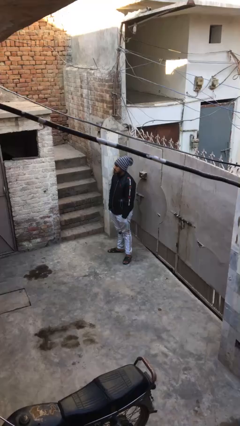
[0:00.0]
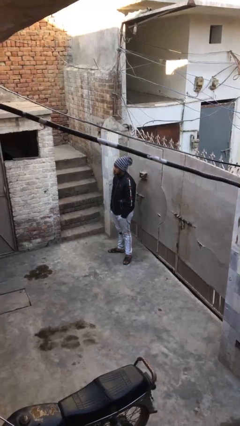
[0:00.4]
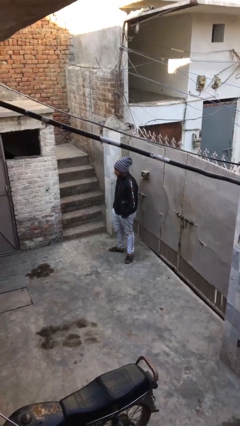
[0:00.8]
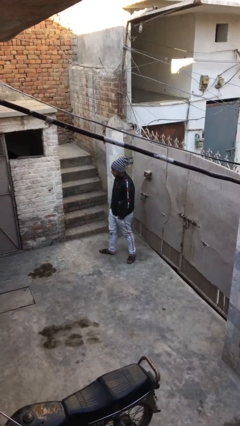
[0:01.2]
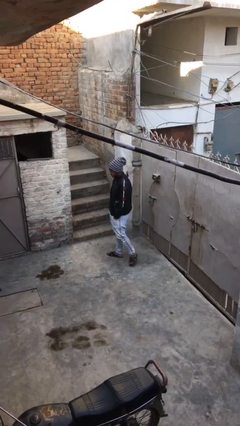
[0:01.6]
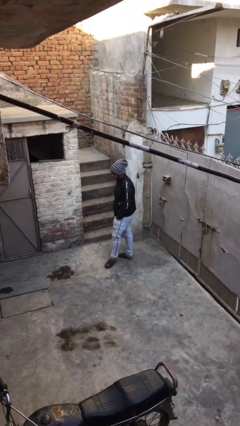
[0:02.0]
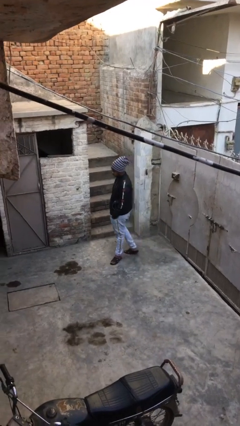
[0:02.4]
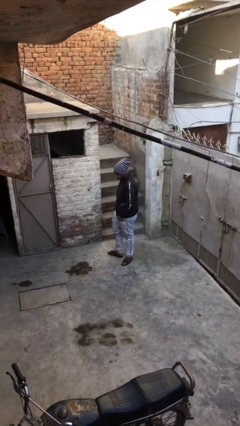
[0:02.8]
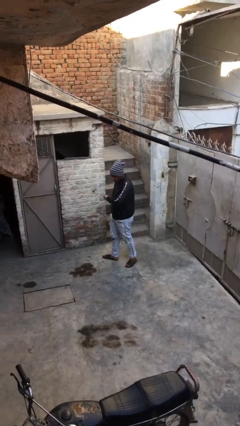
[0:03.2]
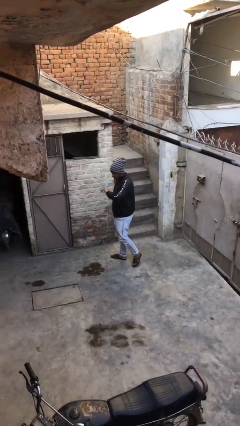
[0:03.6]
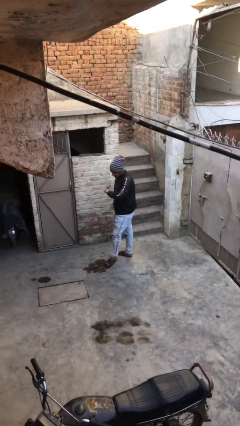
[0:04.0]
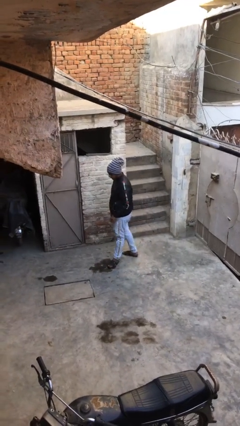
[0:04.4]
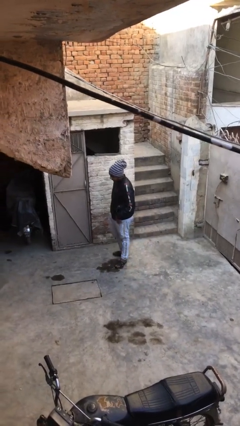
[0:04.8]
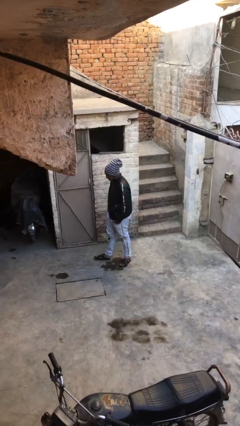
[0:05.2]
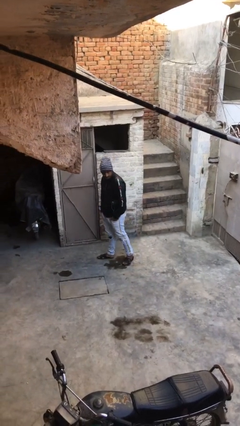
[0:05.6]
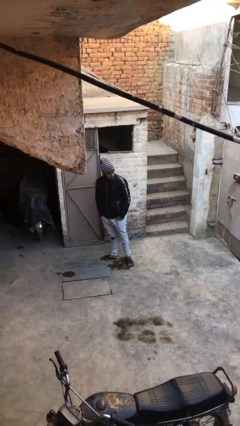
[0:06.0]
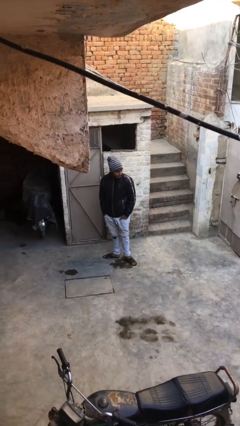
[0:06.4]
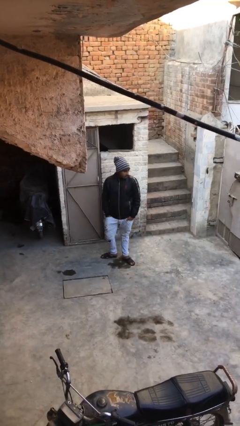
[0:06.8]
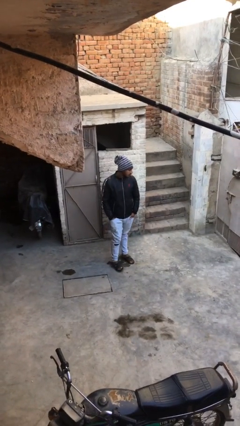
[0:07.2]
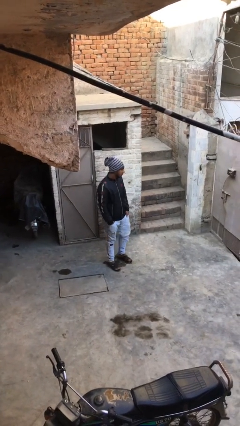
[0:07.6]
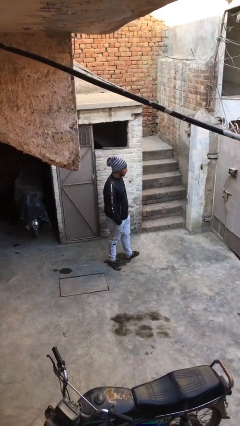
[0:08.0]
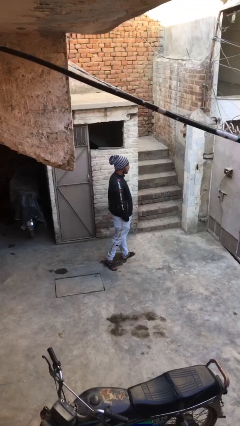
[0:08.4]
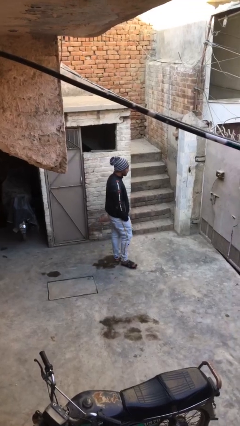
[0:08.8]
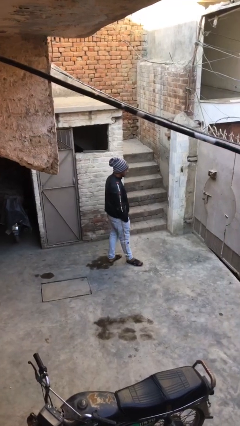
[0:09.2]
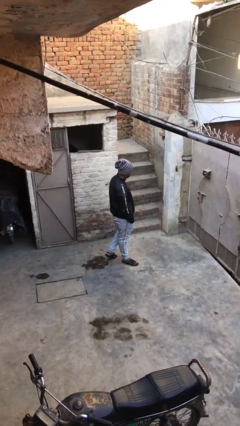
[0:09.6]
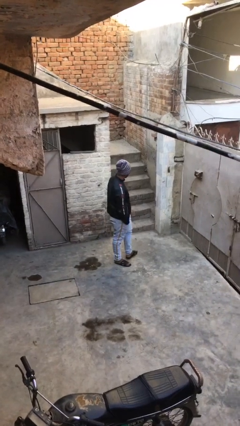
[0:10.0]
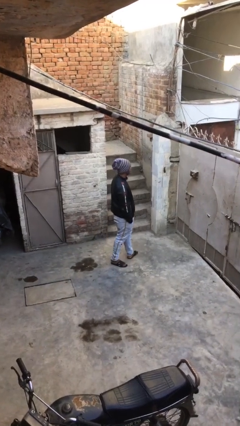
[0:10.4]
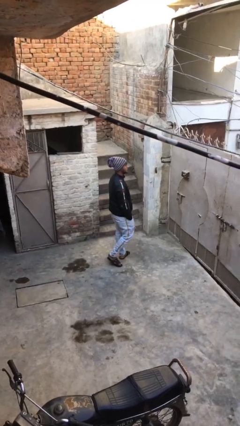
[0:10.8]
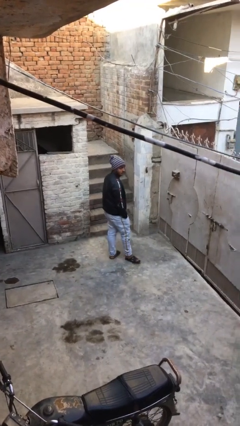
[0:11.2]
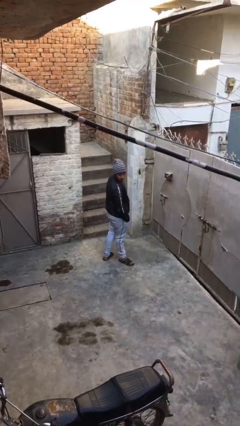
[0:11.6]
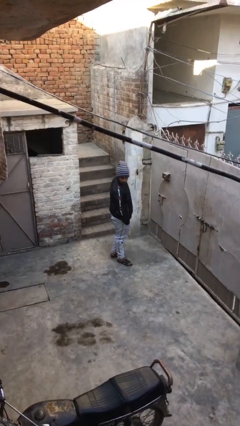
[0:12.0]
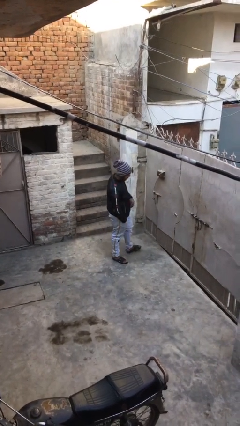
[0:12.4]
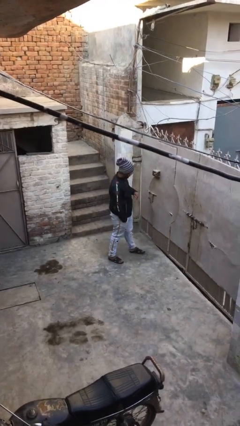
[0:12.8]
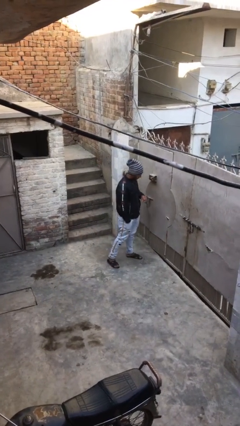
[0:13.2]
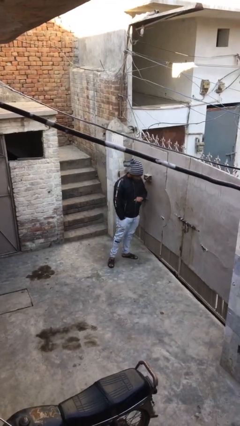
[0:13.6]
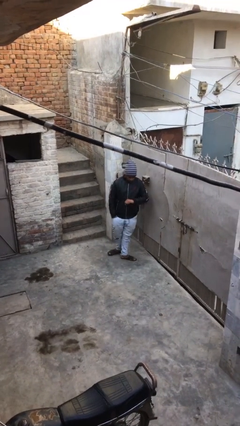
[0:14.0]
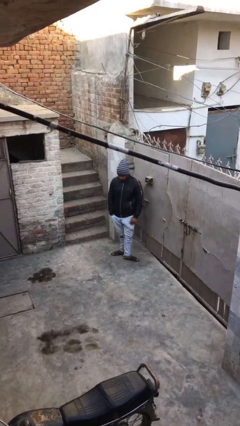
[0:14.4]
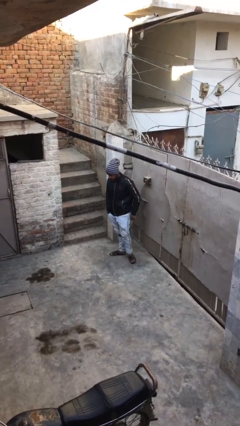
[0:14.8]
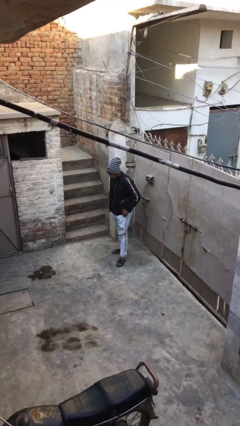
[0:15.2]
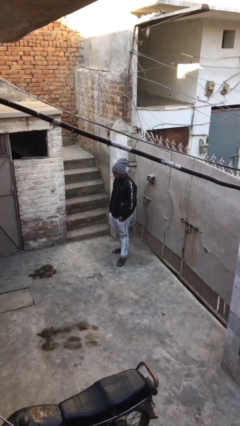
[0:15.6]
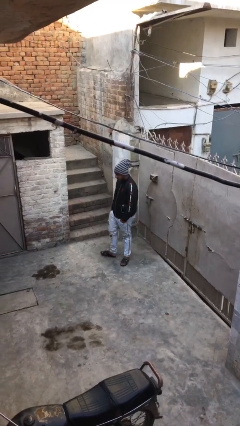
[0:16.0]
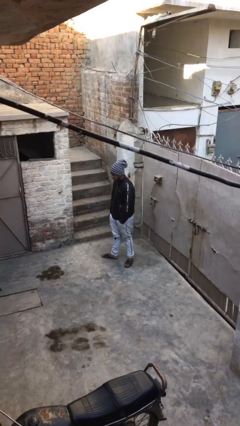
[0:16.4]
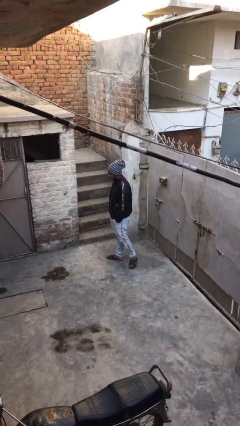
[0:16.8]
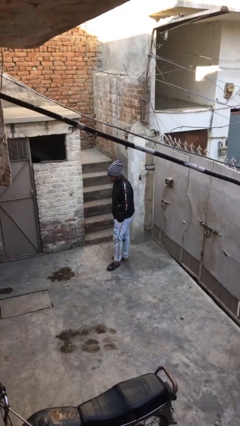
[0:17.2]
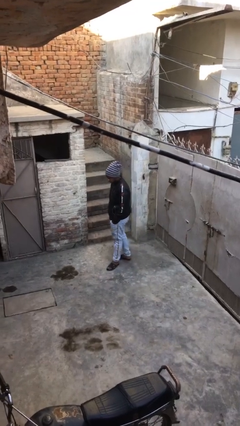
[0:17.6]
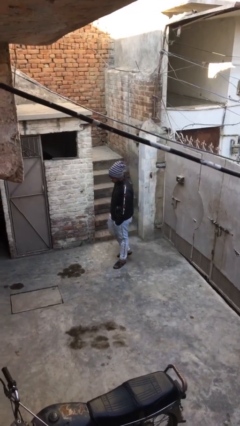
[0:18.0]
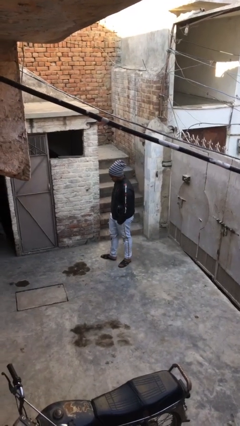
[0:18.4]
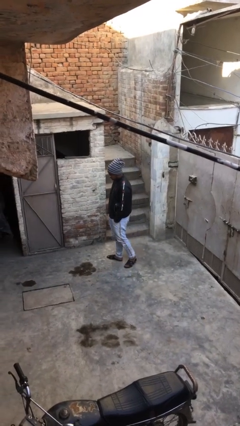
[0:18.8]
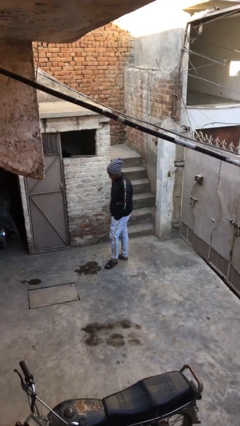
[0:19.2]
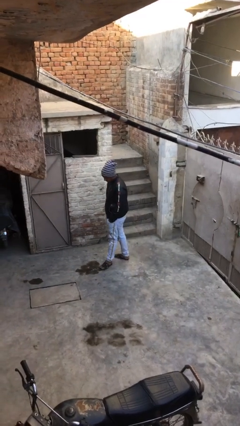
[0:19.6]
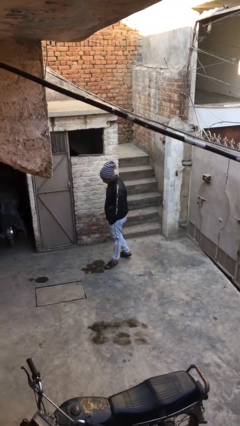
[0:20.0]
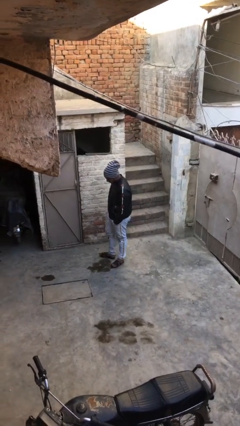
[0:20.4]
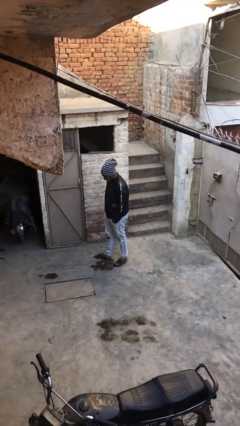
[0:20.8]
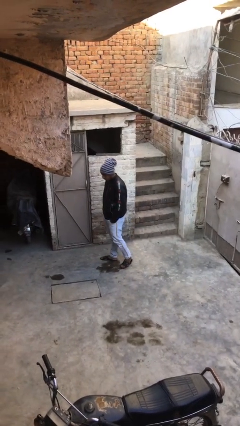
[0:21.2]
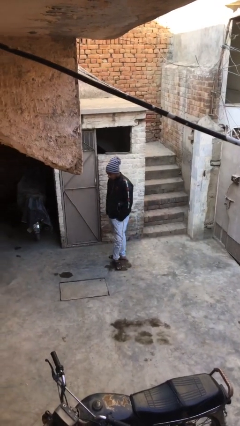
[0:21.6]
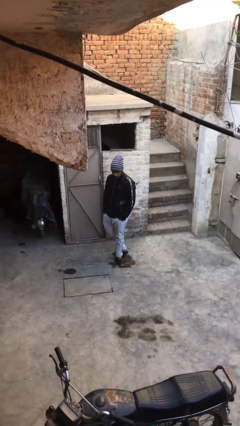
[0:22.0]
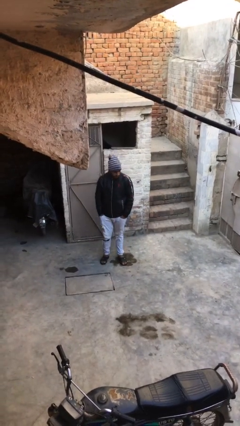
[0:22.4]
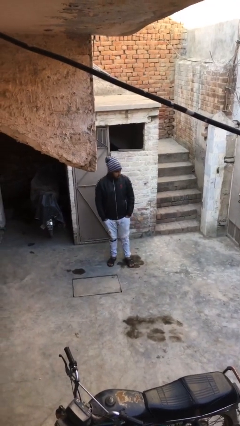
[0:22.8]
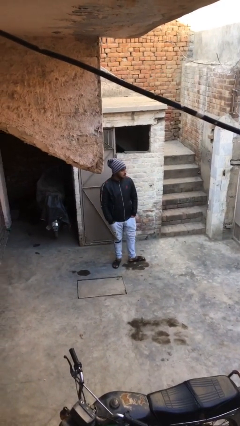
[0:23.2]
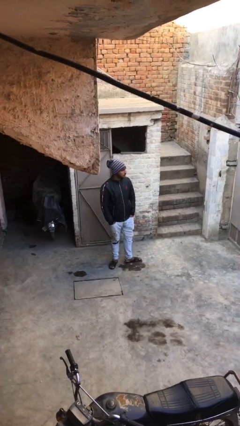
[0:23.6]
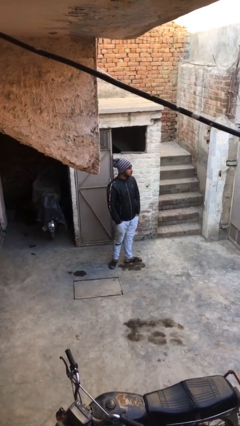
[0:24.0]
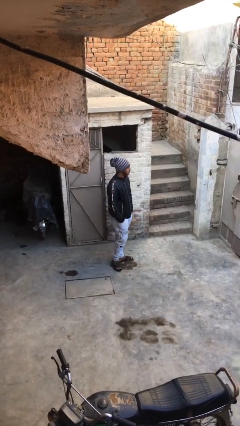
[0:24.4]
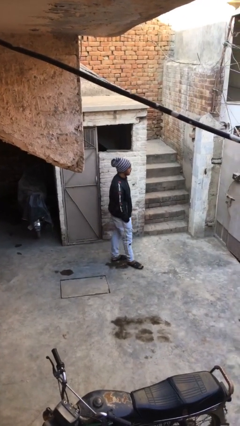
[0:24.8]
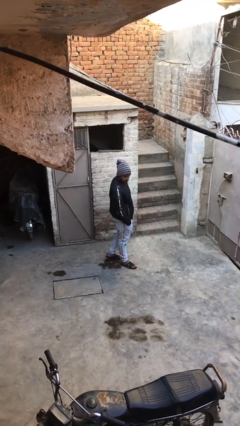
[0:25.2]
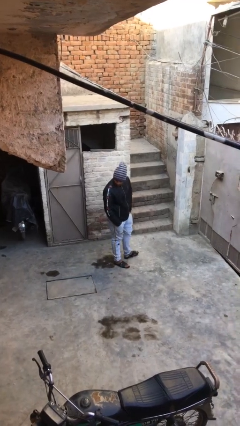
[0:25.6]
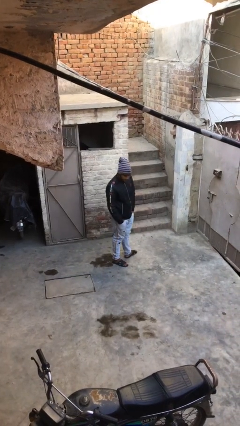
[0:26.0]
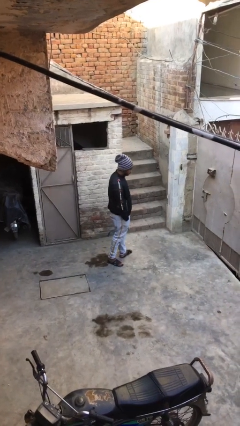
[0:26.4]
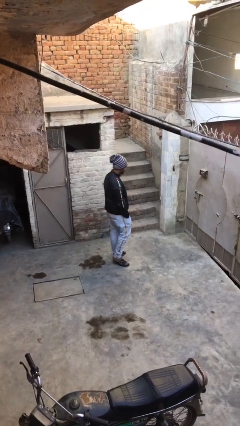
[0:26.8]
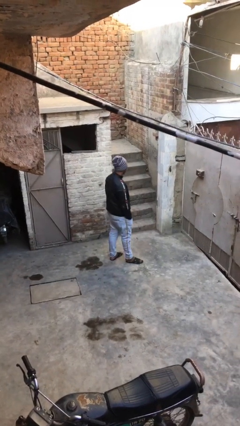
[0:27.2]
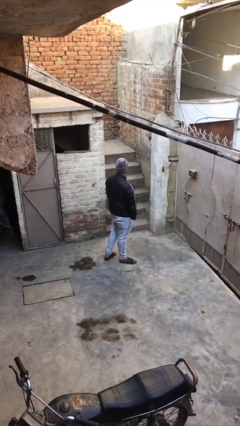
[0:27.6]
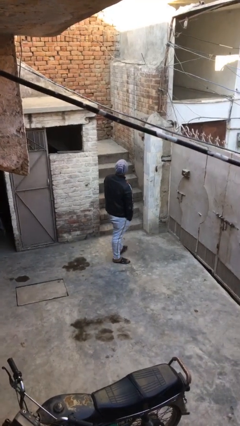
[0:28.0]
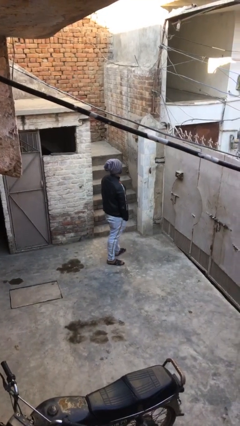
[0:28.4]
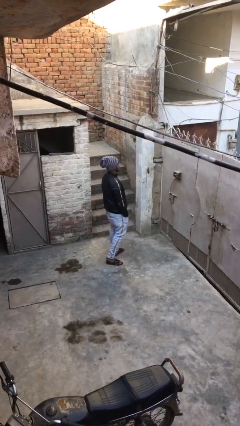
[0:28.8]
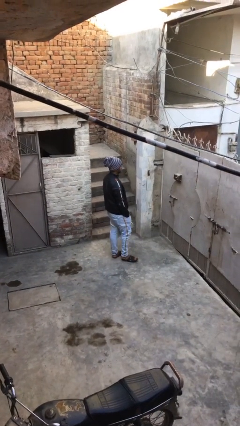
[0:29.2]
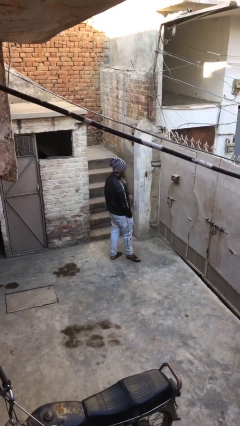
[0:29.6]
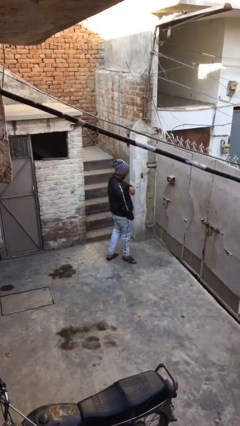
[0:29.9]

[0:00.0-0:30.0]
person walks

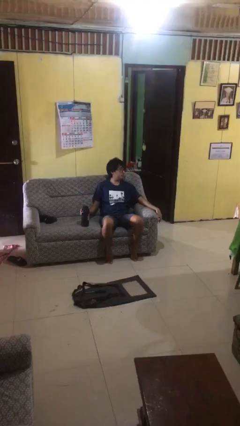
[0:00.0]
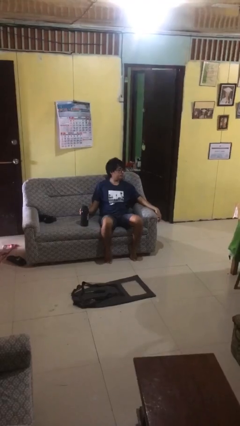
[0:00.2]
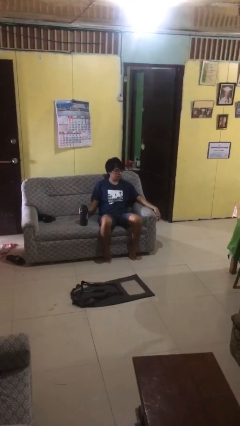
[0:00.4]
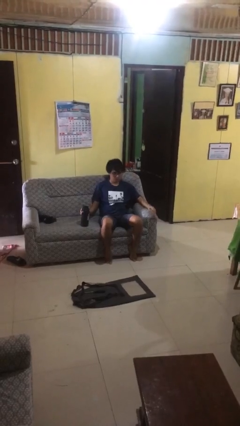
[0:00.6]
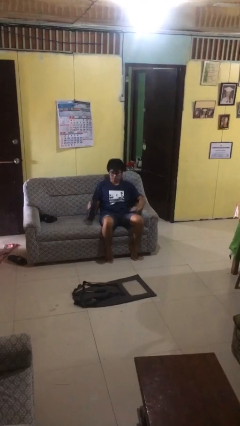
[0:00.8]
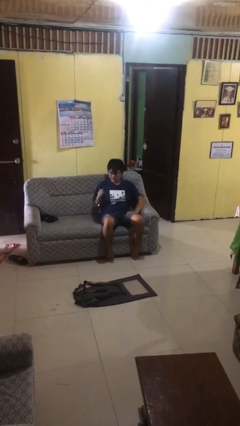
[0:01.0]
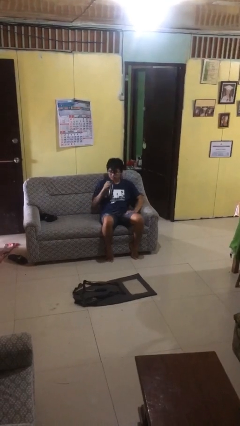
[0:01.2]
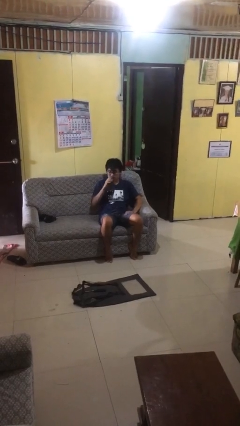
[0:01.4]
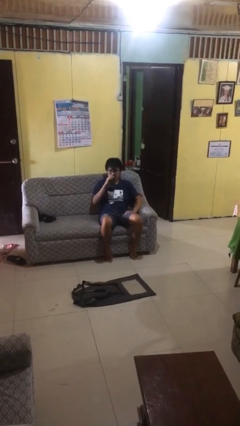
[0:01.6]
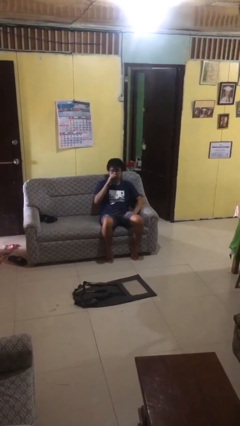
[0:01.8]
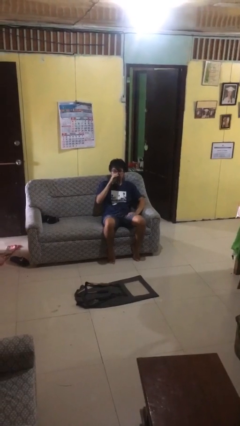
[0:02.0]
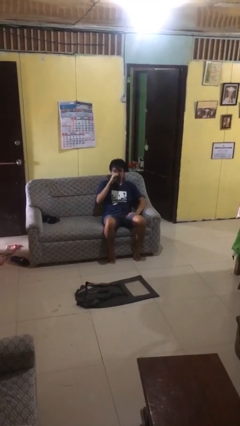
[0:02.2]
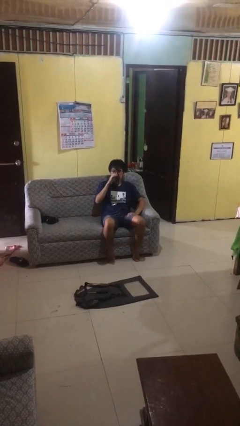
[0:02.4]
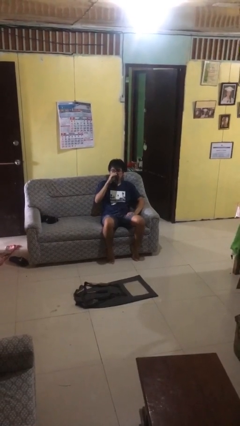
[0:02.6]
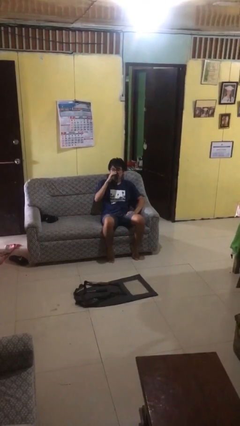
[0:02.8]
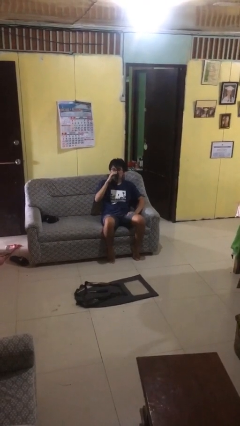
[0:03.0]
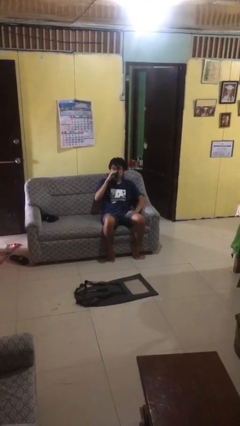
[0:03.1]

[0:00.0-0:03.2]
person drinks from bottle

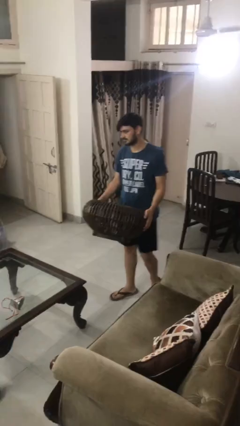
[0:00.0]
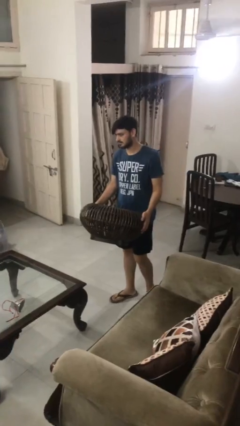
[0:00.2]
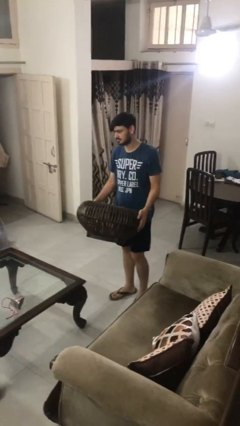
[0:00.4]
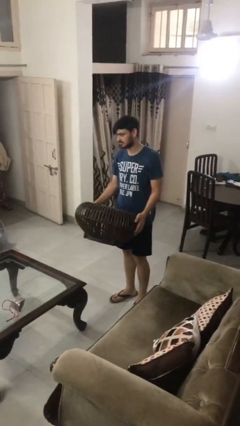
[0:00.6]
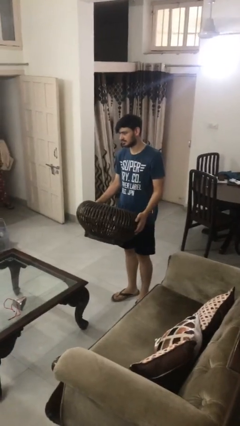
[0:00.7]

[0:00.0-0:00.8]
person carries furniture
